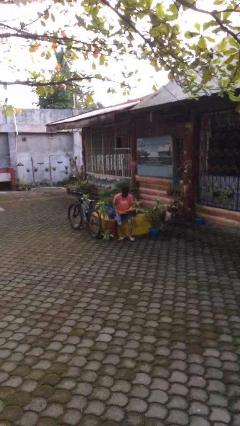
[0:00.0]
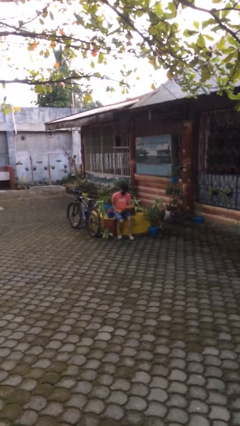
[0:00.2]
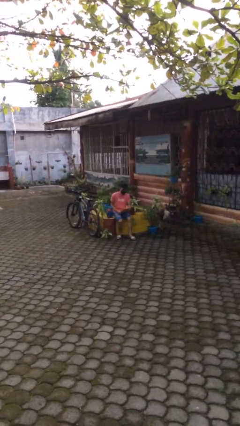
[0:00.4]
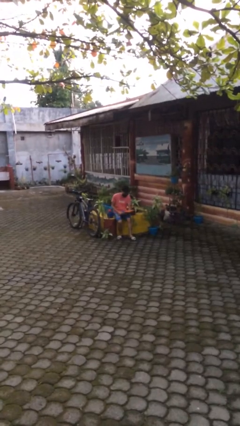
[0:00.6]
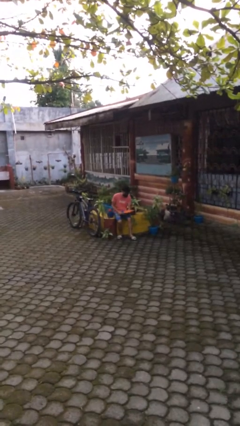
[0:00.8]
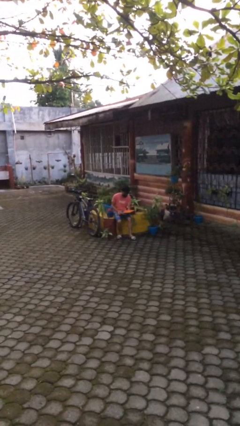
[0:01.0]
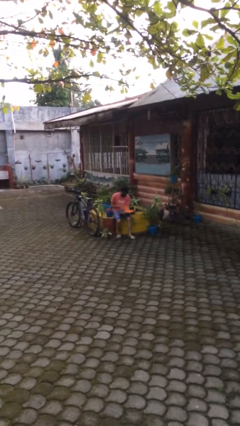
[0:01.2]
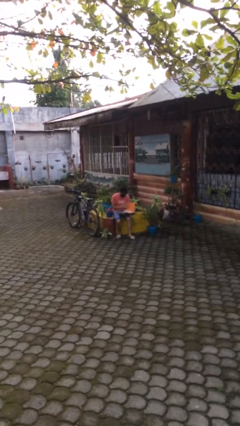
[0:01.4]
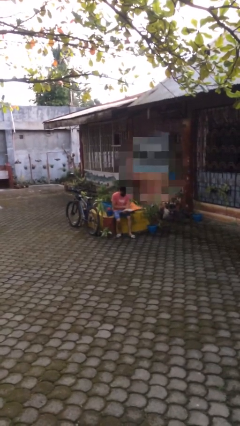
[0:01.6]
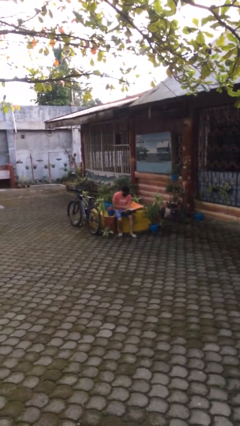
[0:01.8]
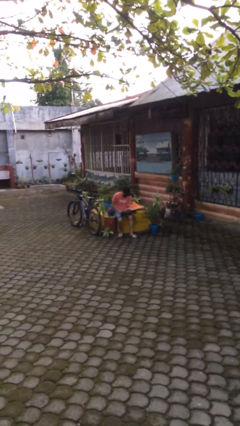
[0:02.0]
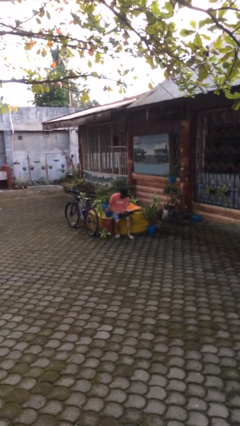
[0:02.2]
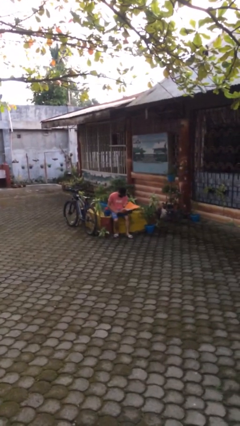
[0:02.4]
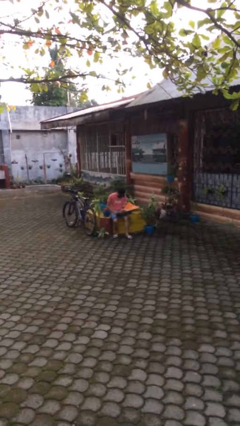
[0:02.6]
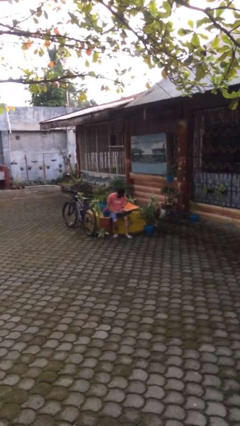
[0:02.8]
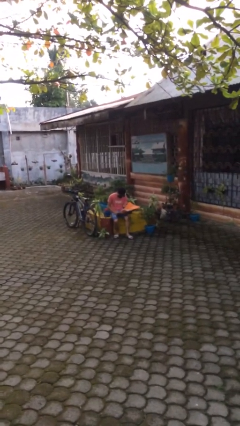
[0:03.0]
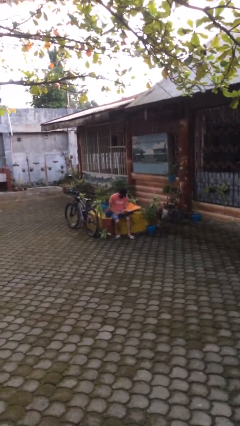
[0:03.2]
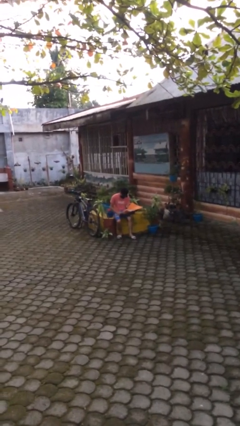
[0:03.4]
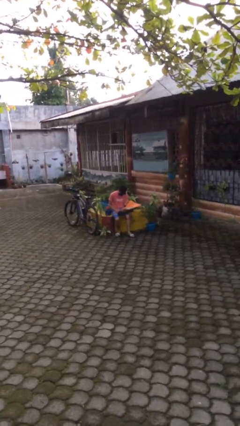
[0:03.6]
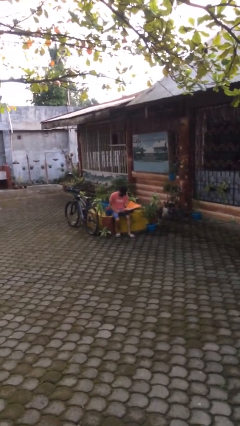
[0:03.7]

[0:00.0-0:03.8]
person reads document

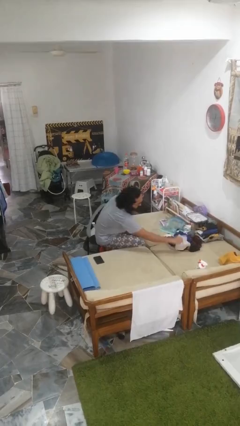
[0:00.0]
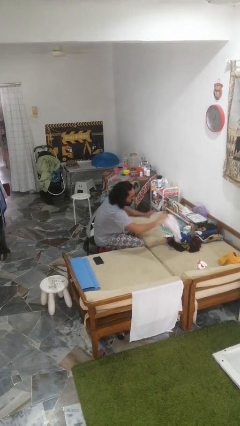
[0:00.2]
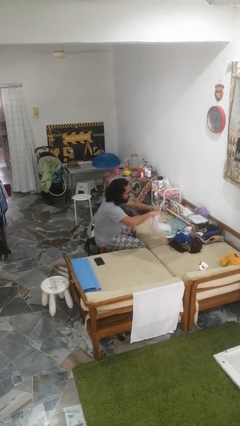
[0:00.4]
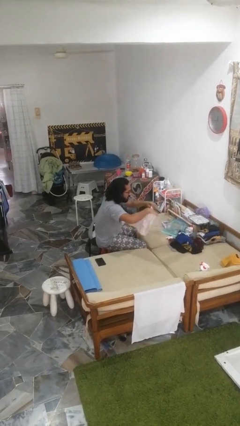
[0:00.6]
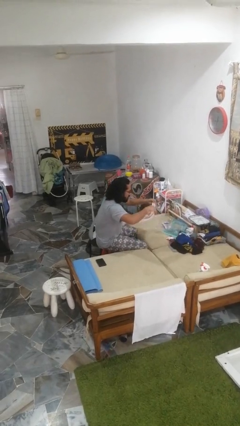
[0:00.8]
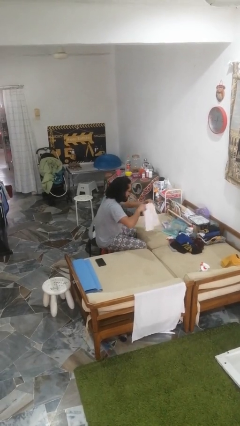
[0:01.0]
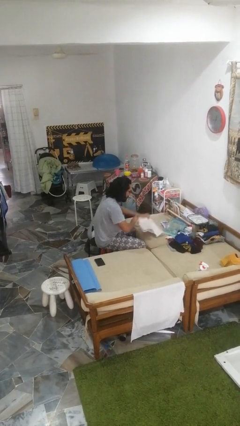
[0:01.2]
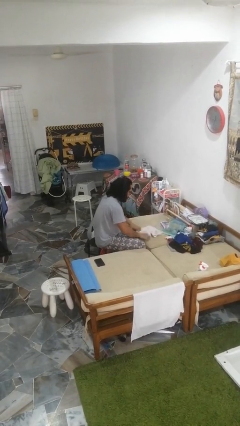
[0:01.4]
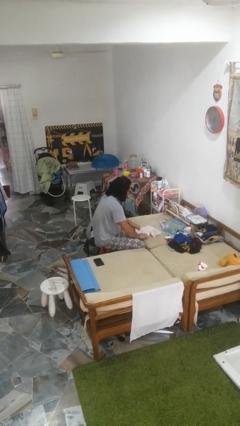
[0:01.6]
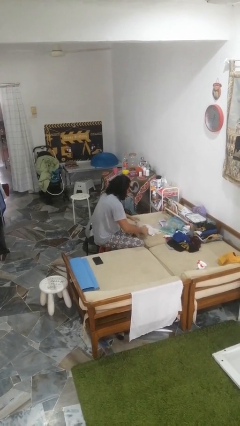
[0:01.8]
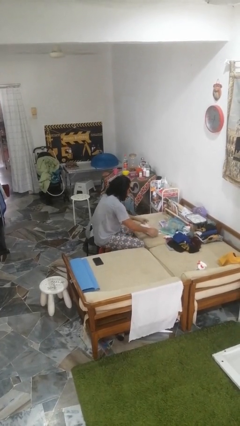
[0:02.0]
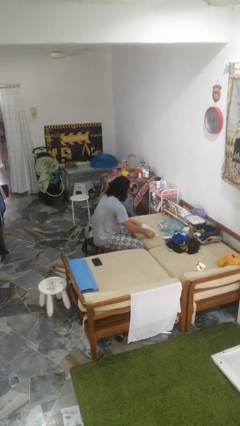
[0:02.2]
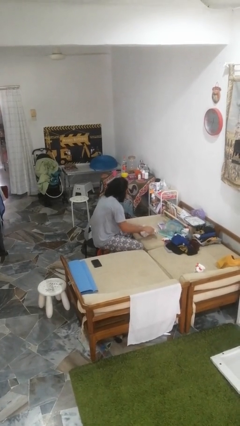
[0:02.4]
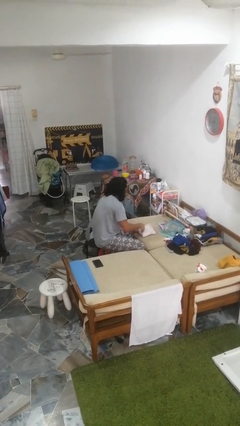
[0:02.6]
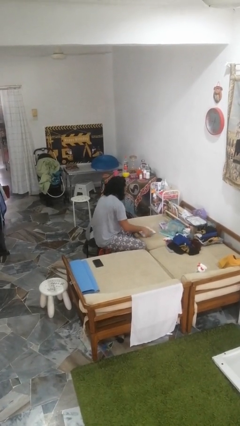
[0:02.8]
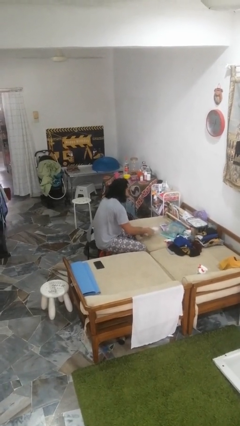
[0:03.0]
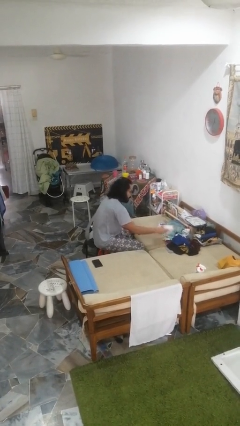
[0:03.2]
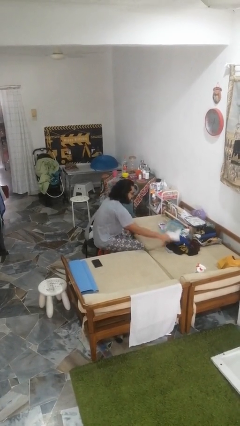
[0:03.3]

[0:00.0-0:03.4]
person folds pants

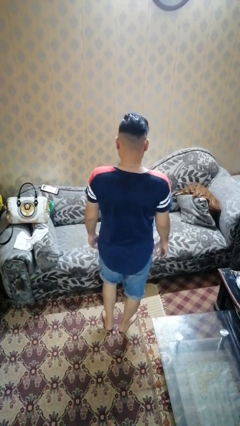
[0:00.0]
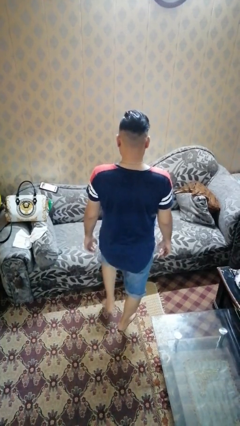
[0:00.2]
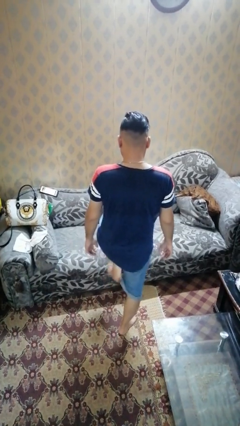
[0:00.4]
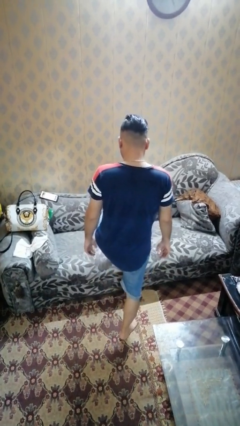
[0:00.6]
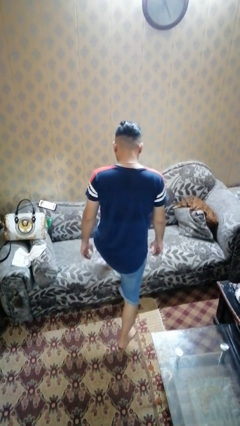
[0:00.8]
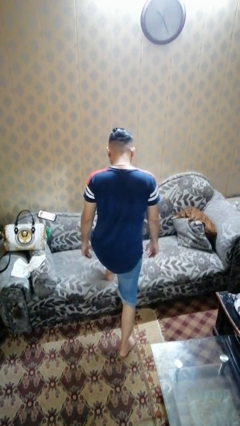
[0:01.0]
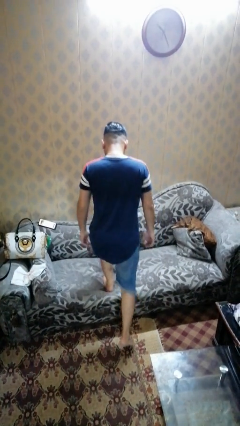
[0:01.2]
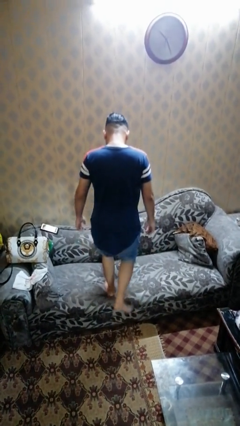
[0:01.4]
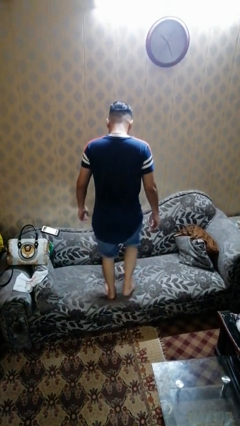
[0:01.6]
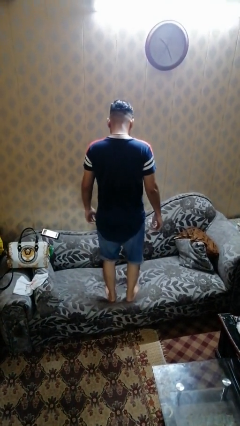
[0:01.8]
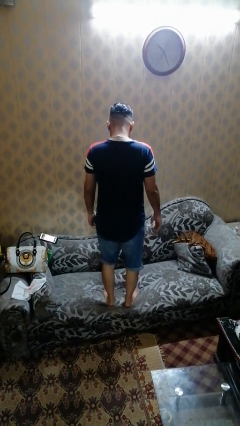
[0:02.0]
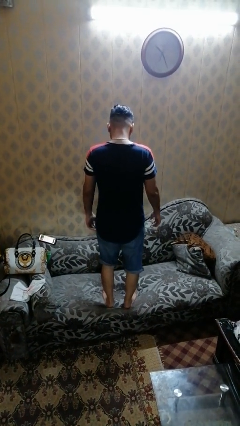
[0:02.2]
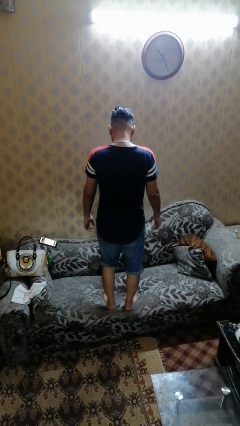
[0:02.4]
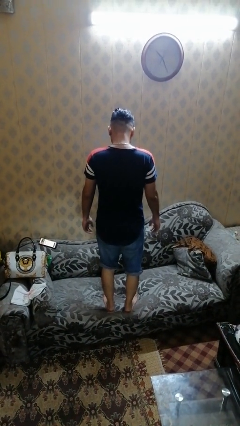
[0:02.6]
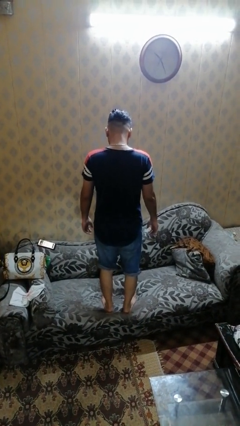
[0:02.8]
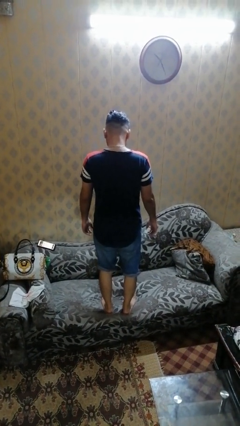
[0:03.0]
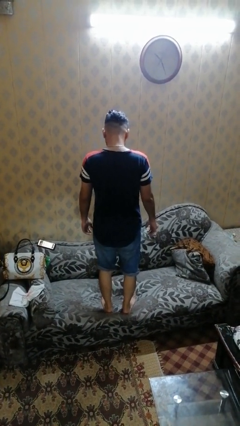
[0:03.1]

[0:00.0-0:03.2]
person climbs on couch

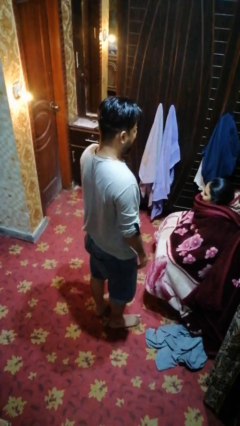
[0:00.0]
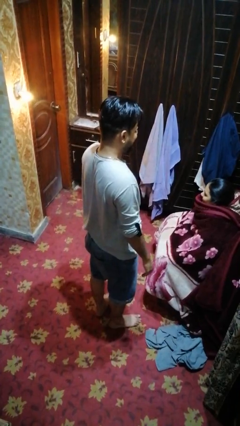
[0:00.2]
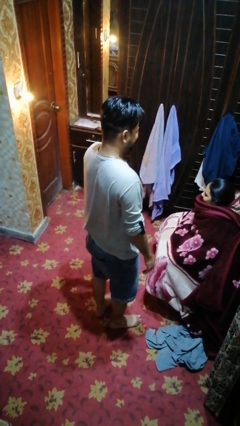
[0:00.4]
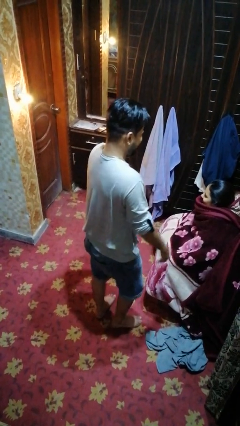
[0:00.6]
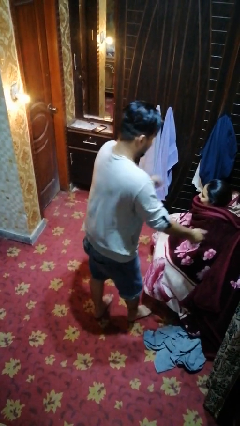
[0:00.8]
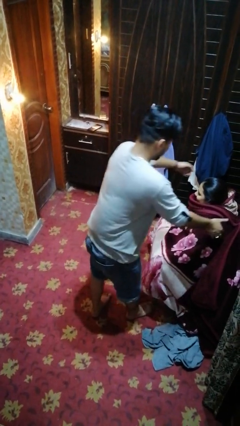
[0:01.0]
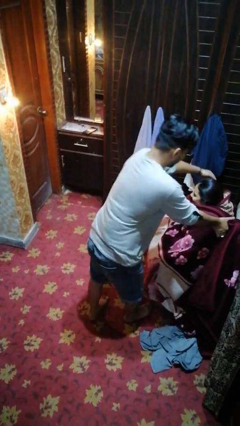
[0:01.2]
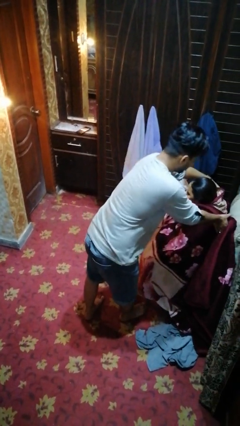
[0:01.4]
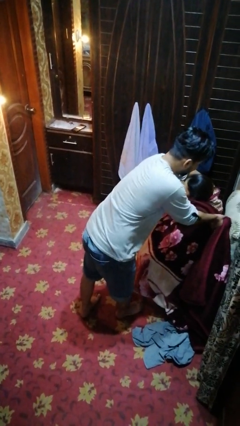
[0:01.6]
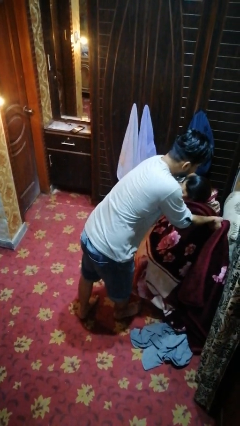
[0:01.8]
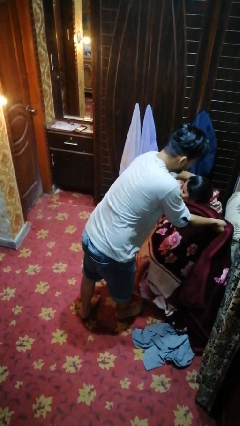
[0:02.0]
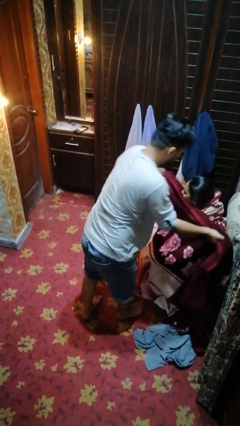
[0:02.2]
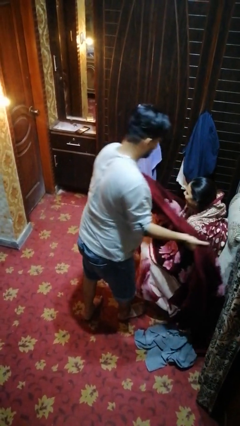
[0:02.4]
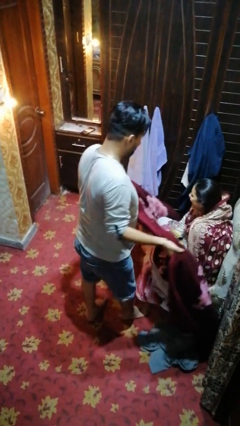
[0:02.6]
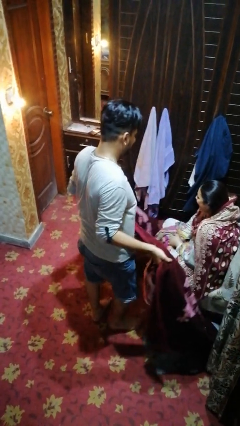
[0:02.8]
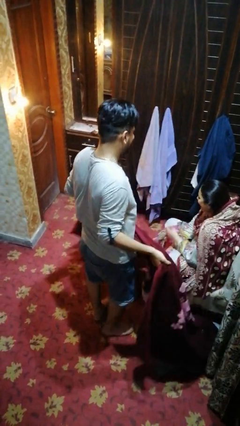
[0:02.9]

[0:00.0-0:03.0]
person uncovers friend with blanket

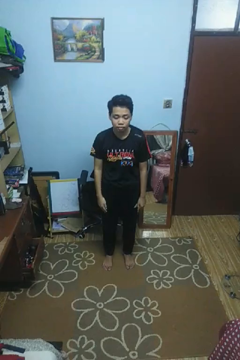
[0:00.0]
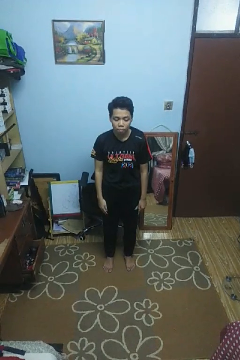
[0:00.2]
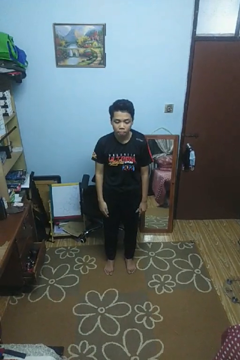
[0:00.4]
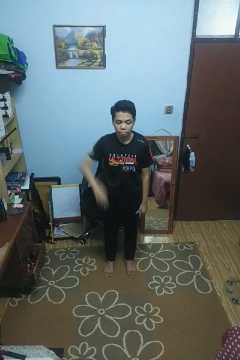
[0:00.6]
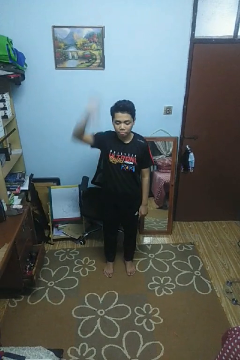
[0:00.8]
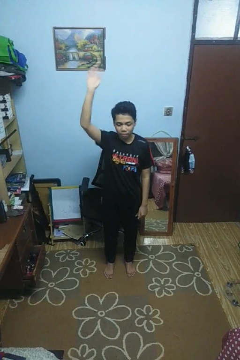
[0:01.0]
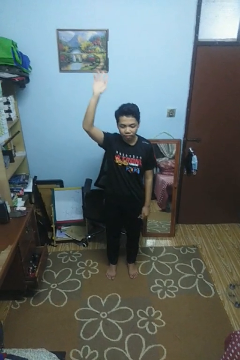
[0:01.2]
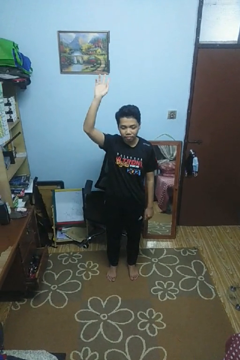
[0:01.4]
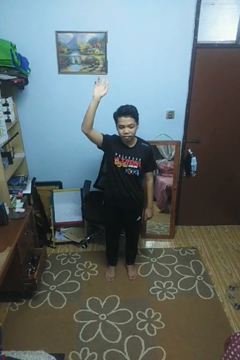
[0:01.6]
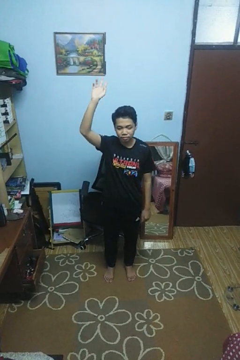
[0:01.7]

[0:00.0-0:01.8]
person gestures raise hand

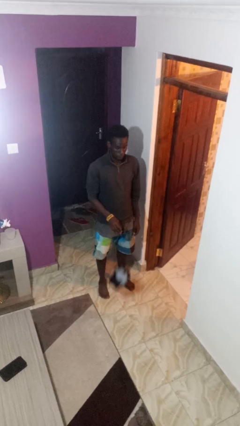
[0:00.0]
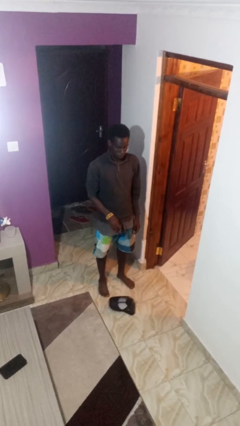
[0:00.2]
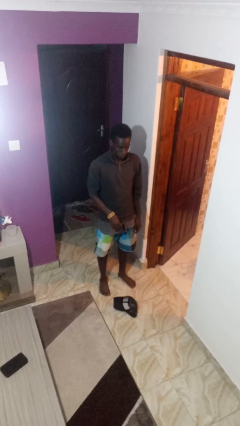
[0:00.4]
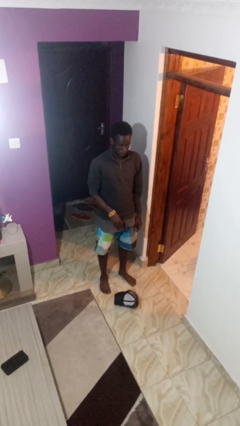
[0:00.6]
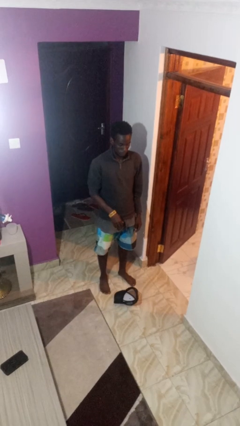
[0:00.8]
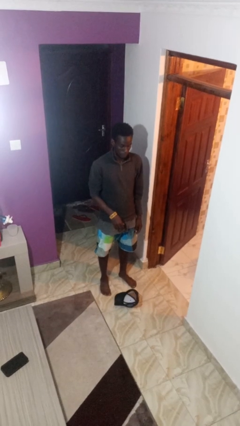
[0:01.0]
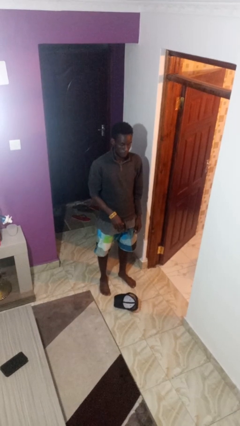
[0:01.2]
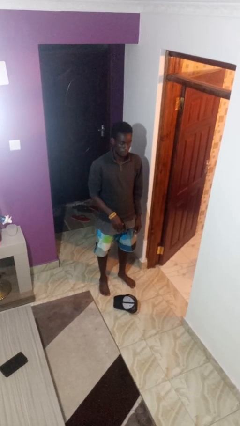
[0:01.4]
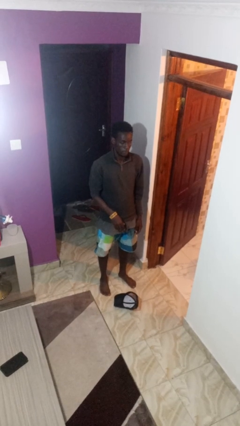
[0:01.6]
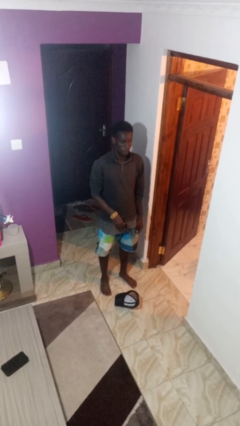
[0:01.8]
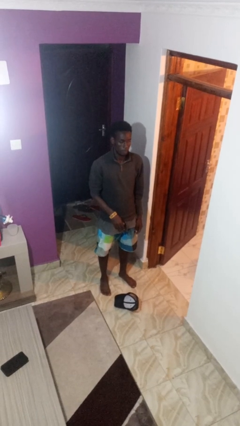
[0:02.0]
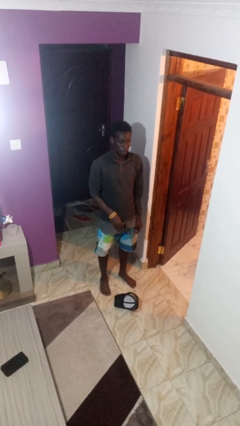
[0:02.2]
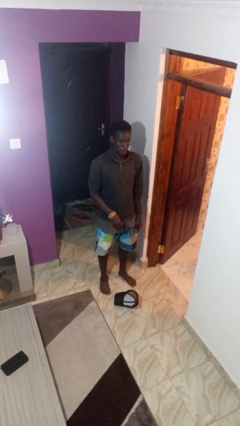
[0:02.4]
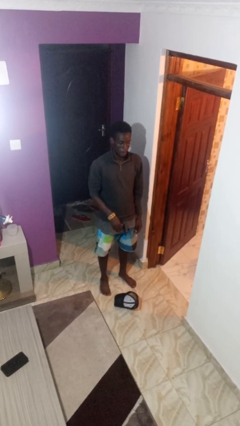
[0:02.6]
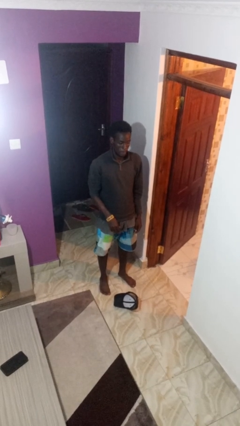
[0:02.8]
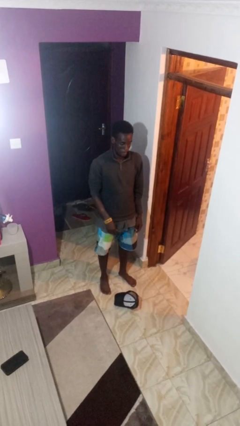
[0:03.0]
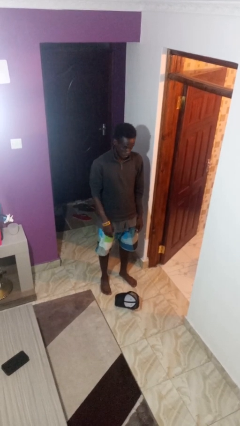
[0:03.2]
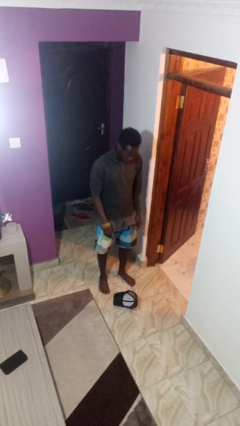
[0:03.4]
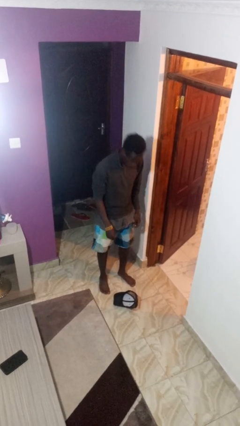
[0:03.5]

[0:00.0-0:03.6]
person drops object